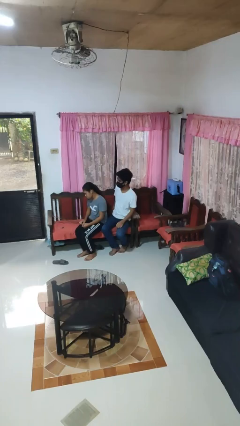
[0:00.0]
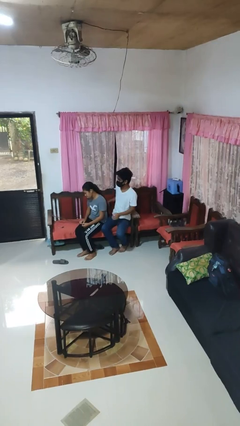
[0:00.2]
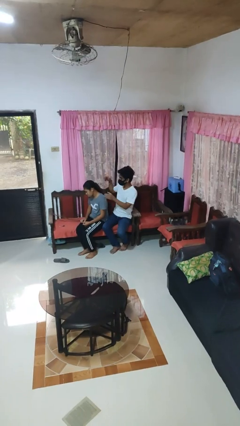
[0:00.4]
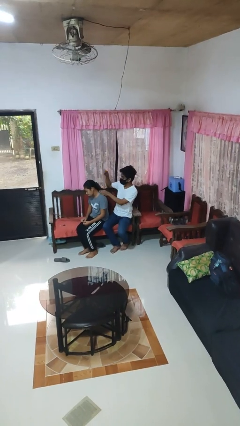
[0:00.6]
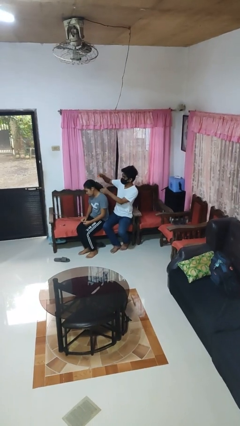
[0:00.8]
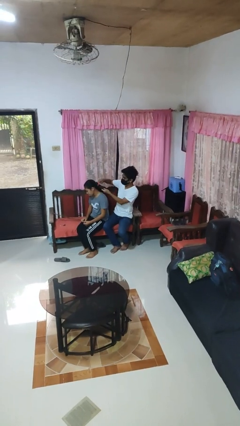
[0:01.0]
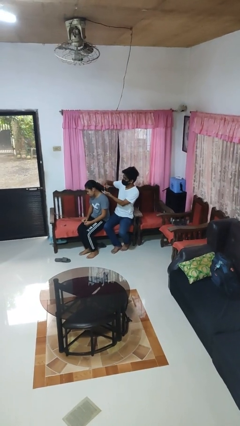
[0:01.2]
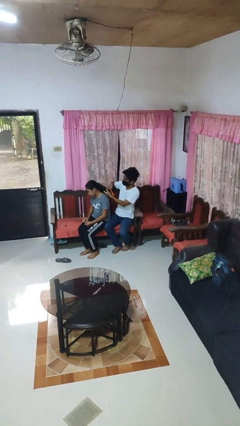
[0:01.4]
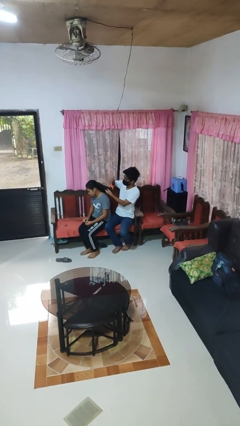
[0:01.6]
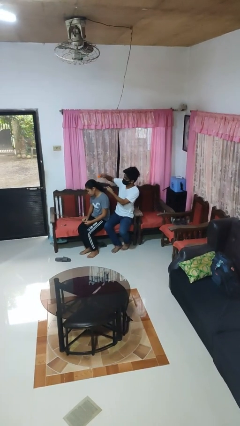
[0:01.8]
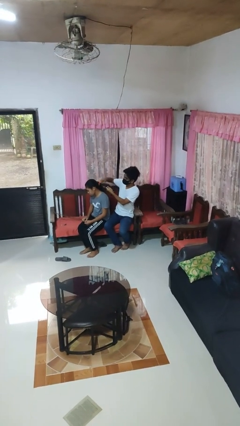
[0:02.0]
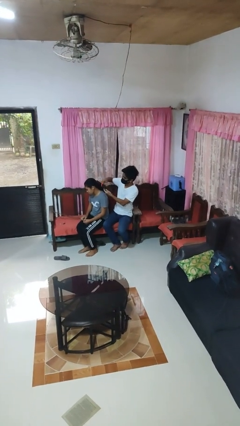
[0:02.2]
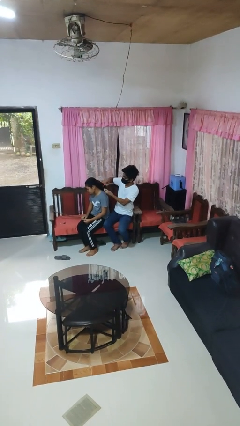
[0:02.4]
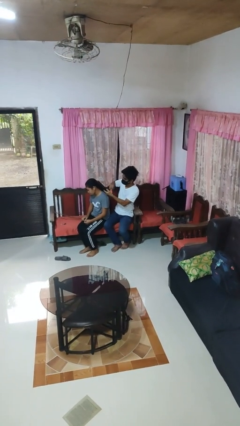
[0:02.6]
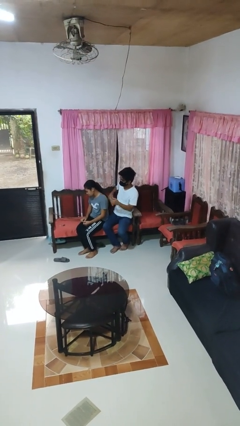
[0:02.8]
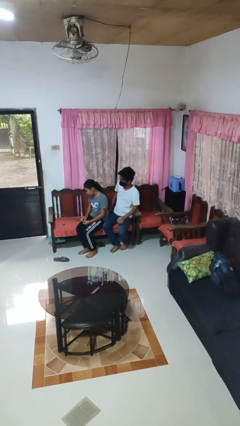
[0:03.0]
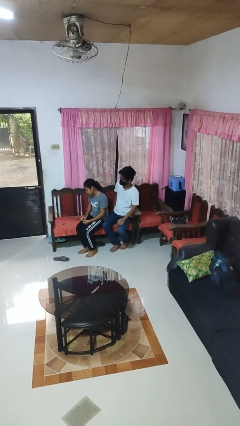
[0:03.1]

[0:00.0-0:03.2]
person brushes hair of person

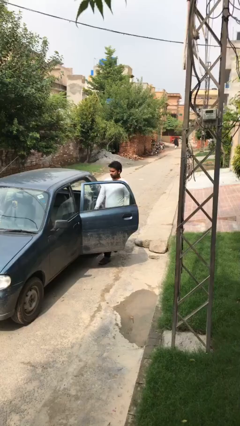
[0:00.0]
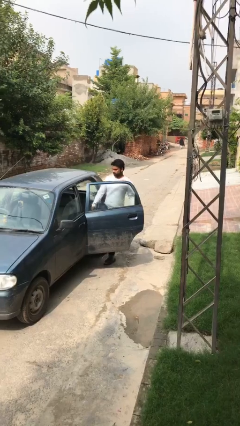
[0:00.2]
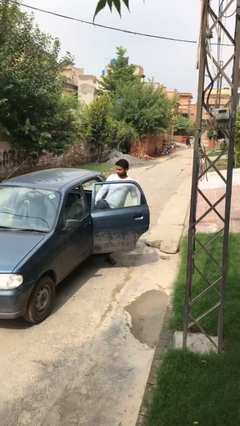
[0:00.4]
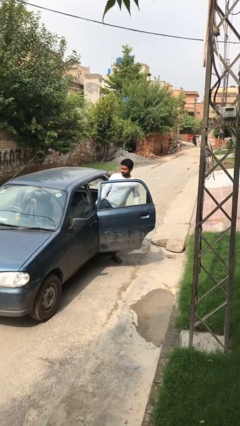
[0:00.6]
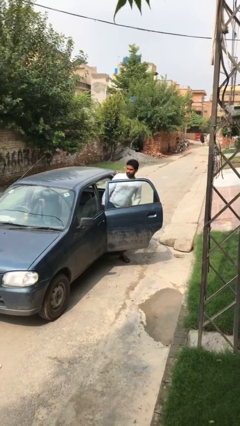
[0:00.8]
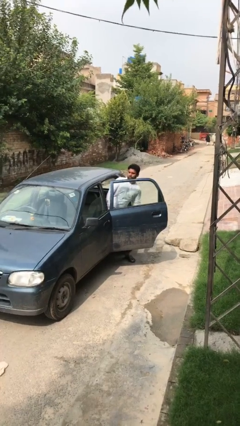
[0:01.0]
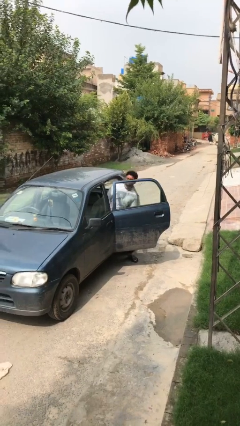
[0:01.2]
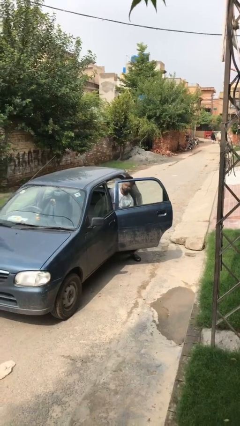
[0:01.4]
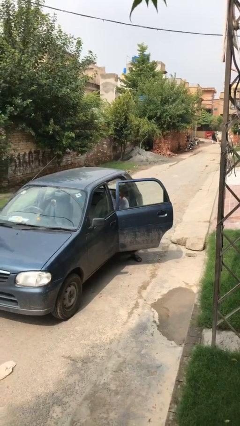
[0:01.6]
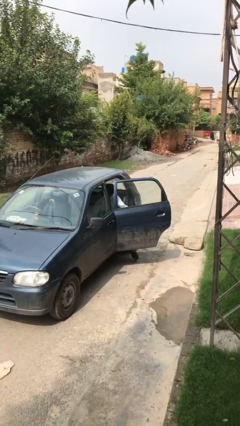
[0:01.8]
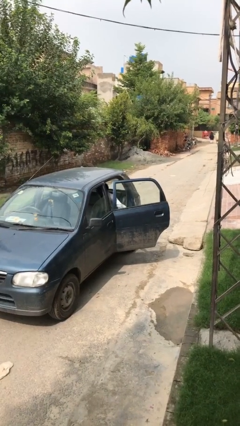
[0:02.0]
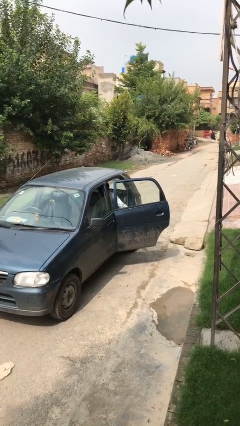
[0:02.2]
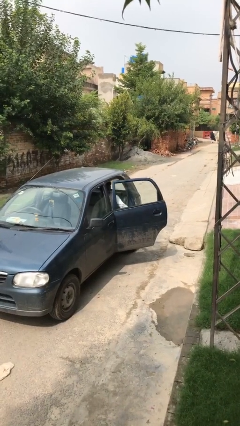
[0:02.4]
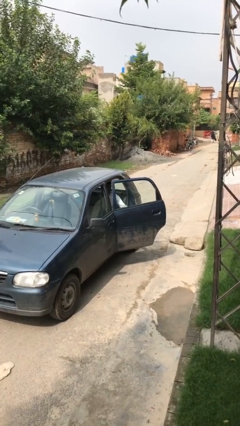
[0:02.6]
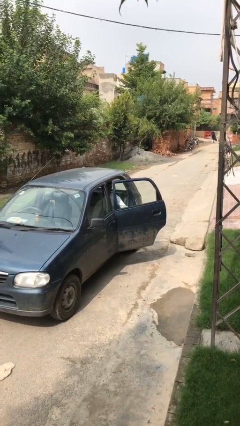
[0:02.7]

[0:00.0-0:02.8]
person enters car

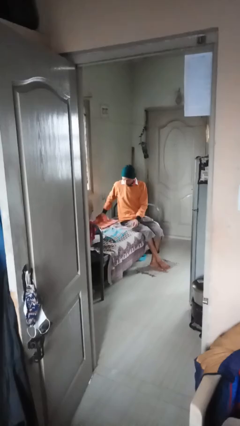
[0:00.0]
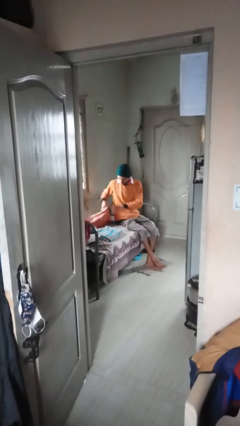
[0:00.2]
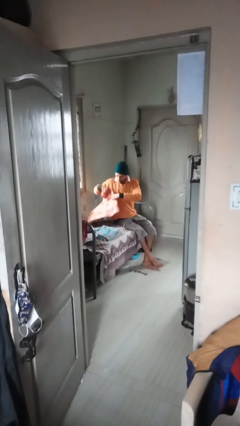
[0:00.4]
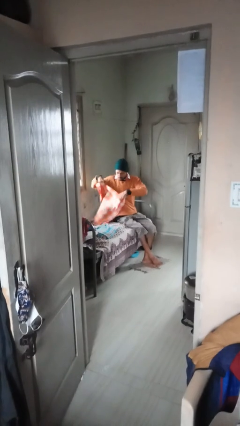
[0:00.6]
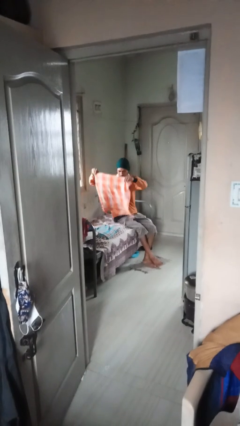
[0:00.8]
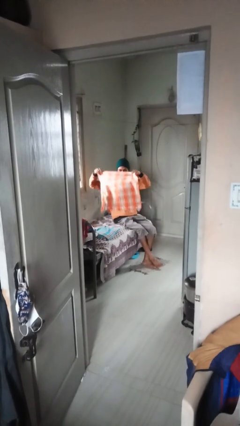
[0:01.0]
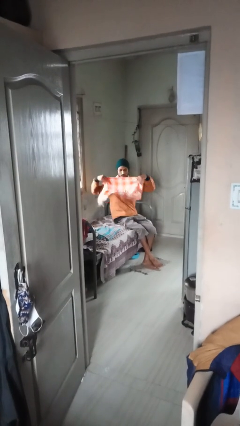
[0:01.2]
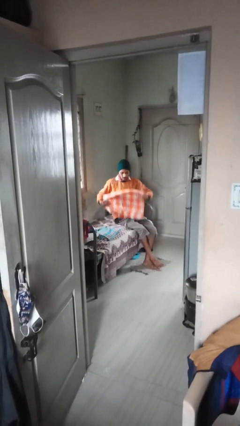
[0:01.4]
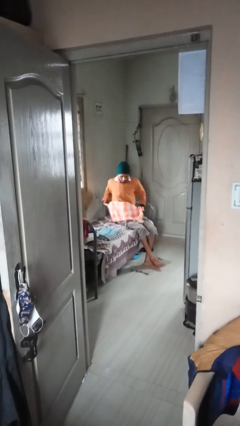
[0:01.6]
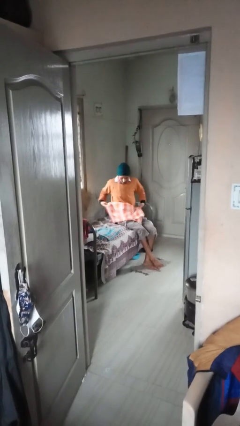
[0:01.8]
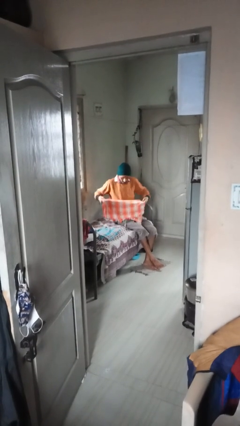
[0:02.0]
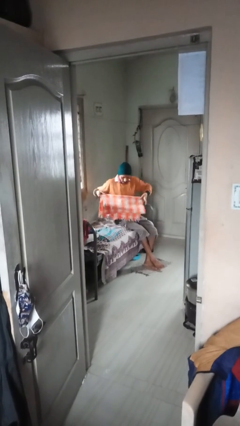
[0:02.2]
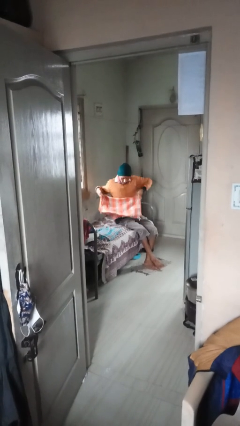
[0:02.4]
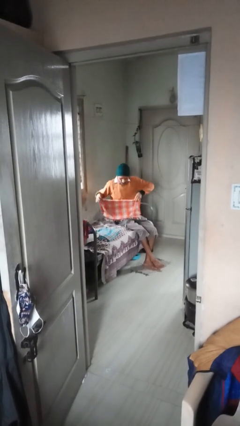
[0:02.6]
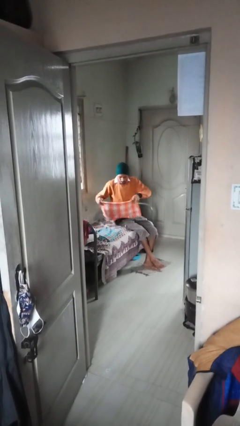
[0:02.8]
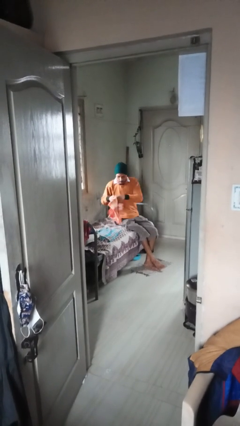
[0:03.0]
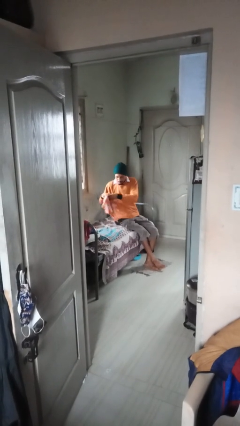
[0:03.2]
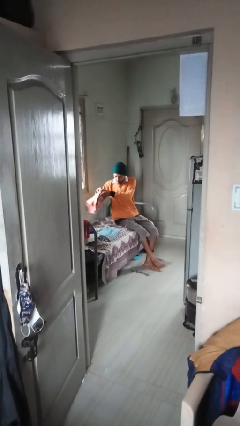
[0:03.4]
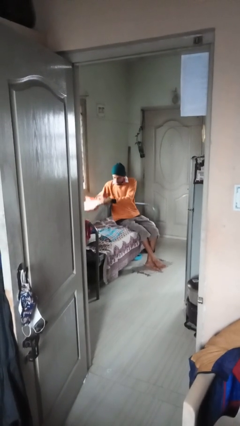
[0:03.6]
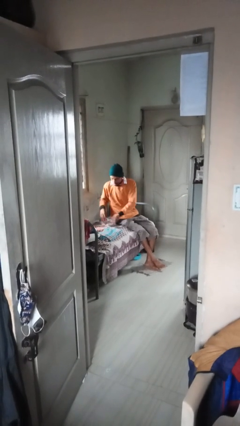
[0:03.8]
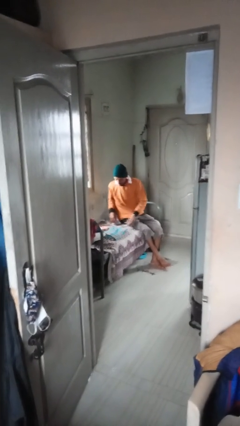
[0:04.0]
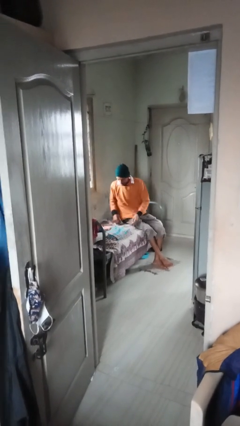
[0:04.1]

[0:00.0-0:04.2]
person folds towel

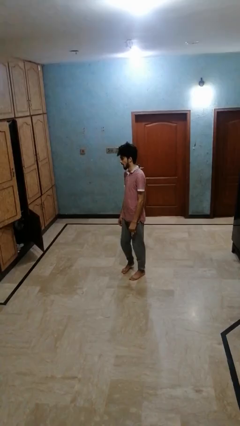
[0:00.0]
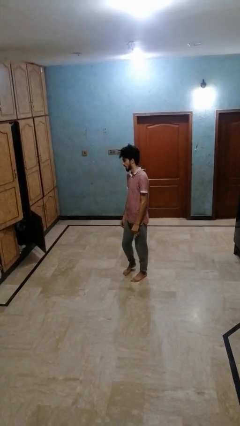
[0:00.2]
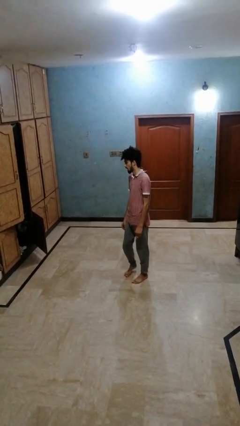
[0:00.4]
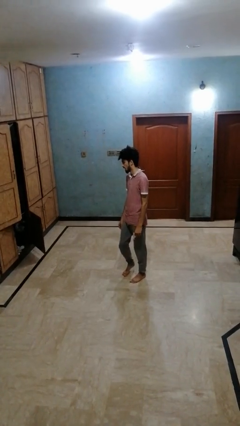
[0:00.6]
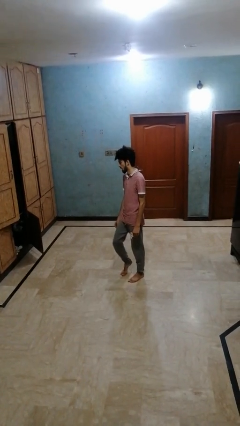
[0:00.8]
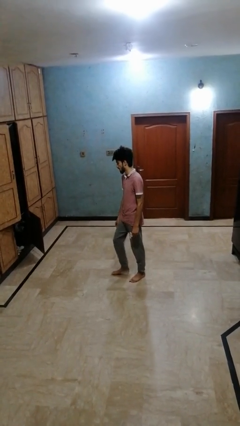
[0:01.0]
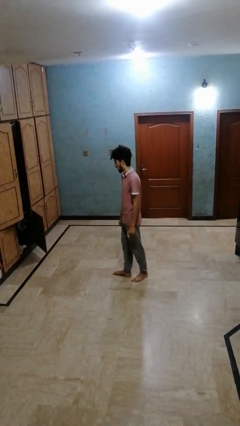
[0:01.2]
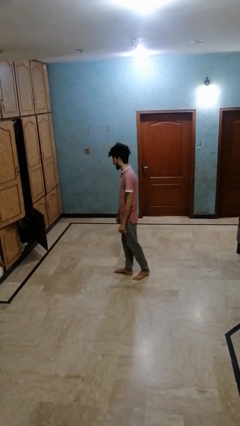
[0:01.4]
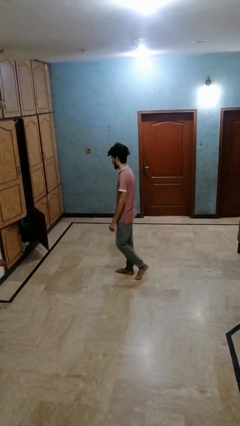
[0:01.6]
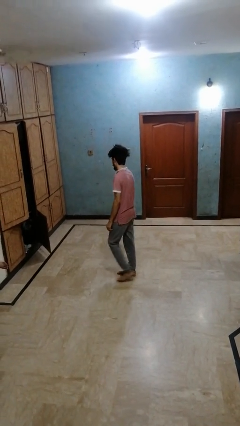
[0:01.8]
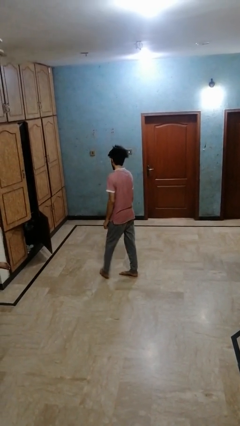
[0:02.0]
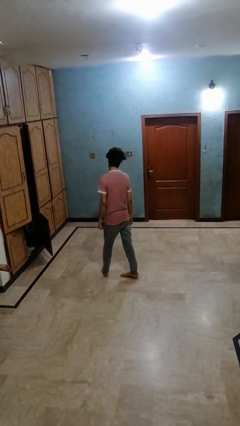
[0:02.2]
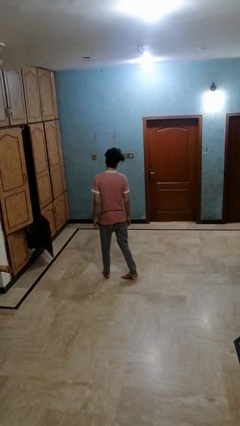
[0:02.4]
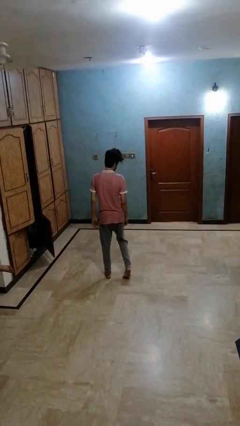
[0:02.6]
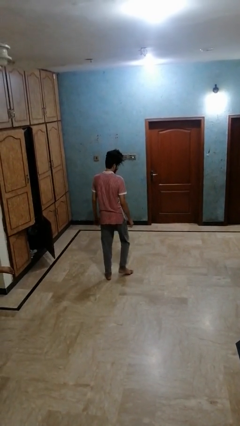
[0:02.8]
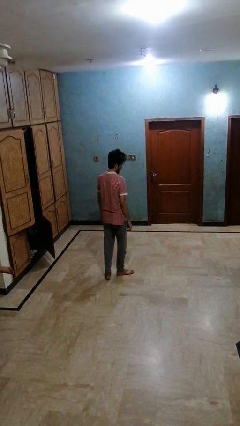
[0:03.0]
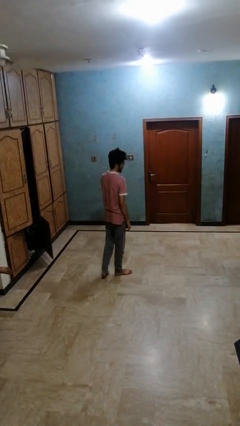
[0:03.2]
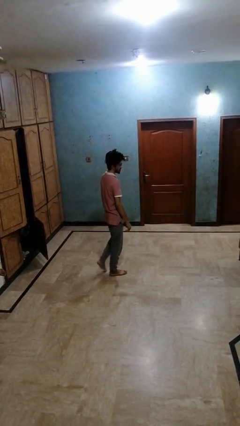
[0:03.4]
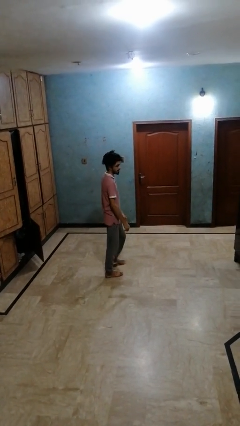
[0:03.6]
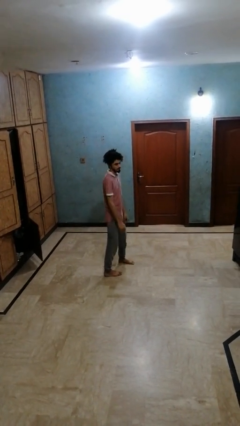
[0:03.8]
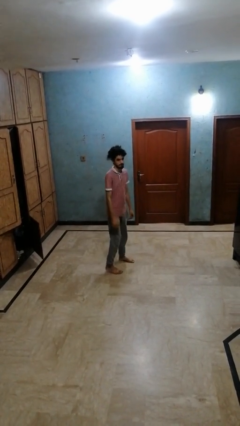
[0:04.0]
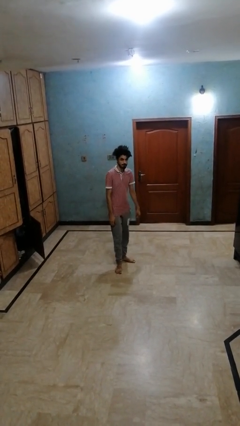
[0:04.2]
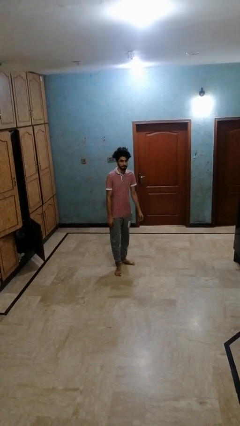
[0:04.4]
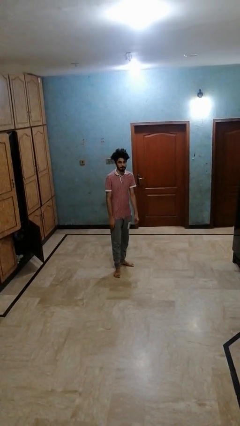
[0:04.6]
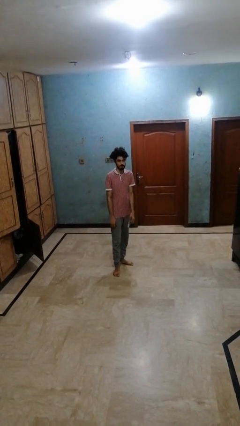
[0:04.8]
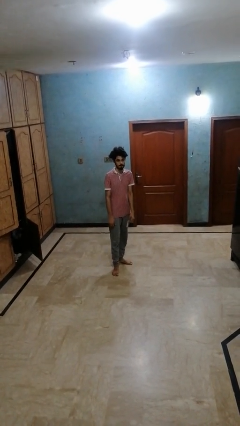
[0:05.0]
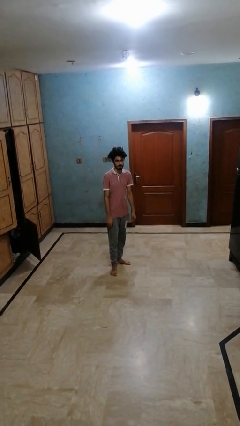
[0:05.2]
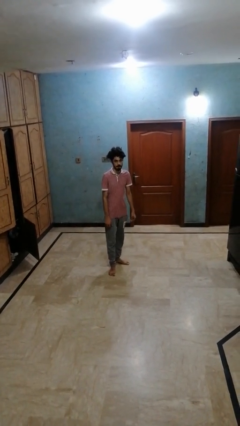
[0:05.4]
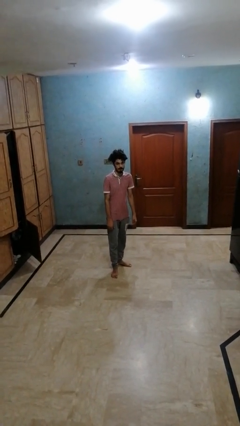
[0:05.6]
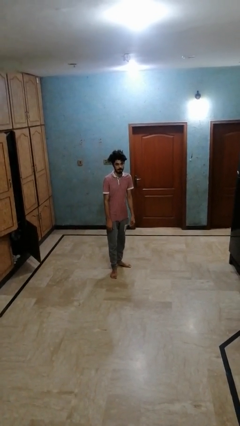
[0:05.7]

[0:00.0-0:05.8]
person twirls

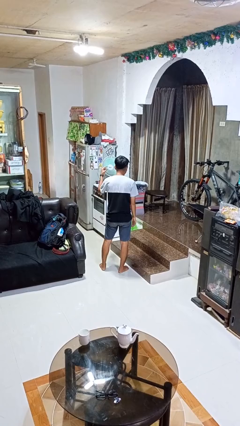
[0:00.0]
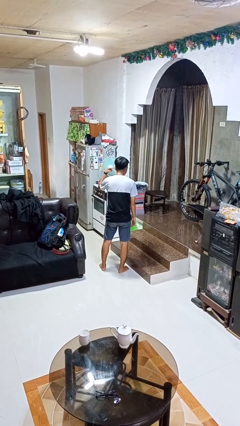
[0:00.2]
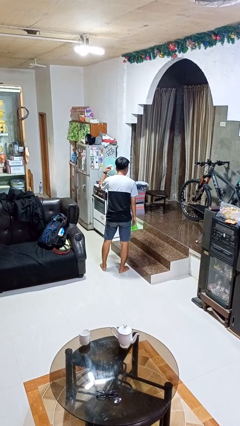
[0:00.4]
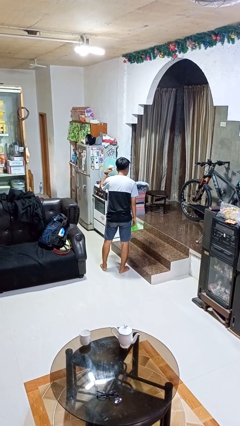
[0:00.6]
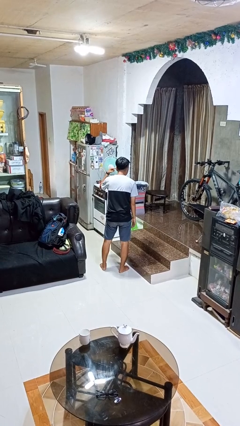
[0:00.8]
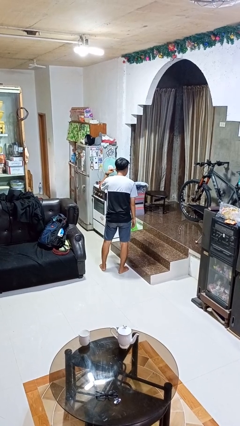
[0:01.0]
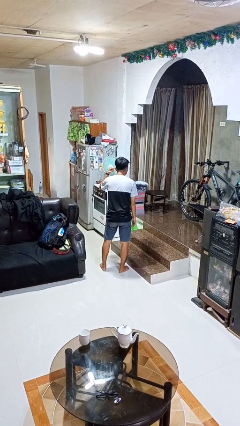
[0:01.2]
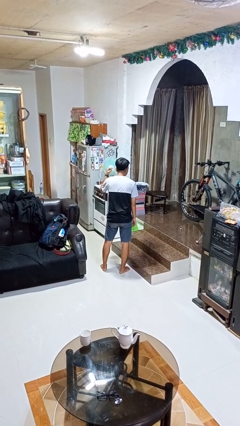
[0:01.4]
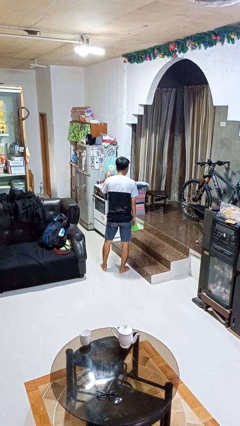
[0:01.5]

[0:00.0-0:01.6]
person gestures listen closely

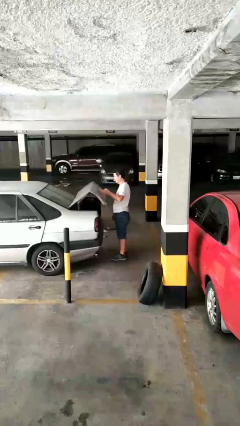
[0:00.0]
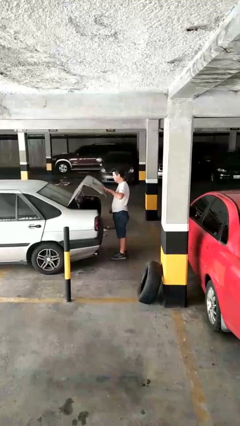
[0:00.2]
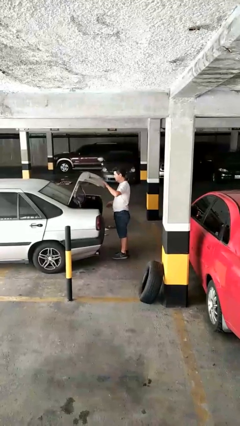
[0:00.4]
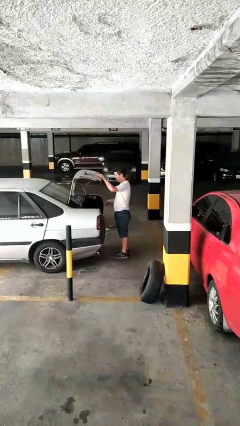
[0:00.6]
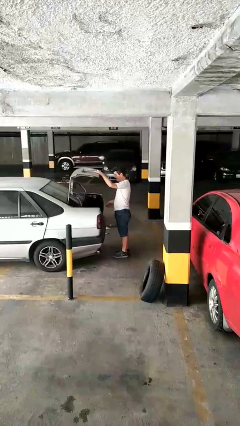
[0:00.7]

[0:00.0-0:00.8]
person opens car trunk
